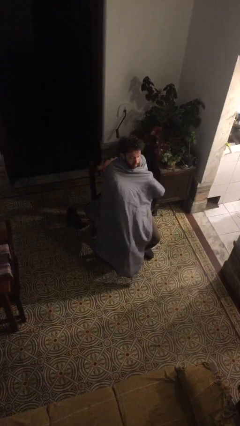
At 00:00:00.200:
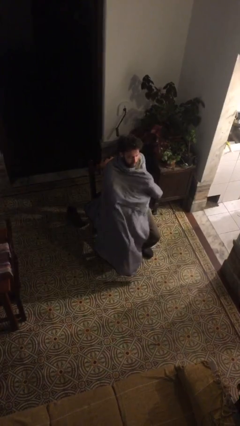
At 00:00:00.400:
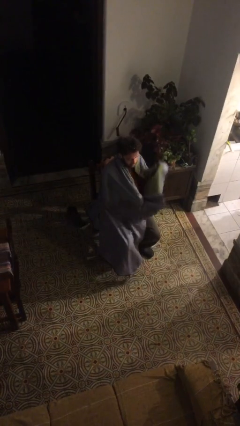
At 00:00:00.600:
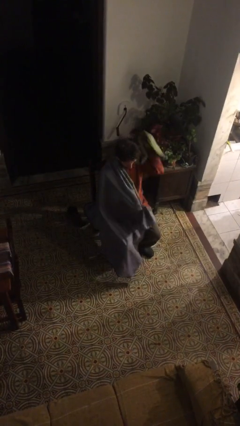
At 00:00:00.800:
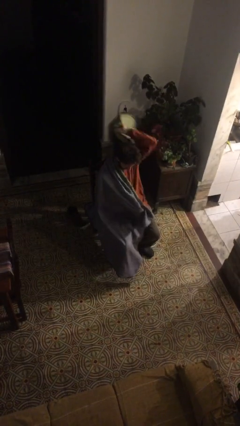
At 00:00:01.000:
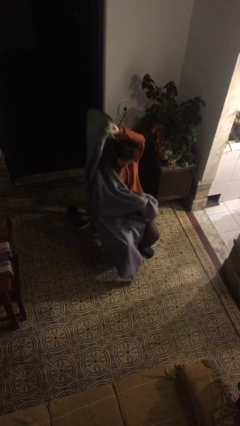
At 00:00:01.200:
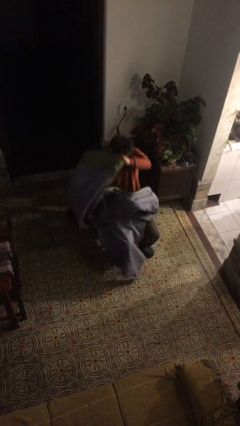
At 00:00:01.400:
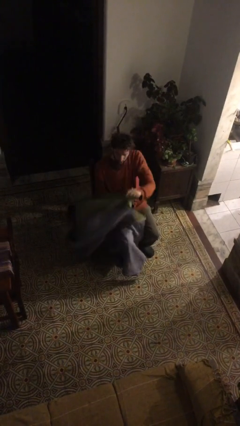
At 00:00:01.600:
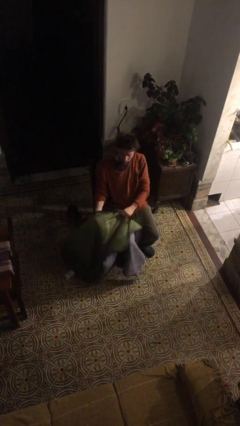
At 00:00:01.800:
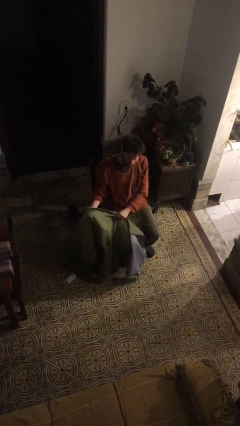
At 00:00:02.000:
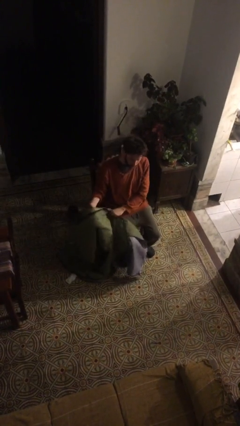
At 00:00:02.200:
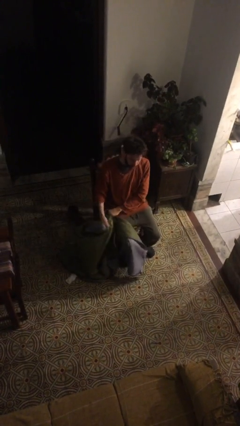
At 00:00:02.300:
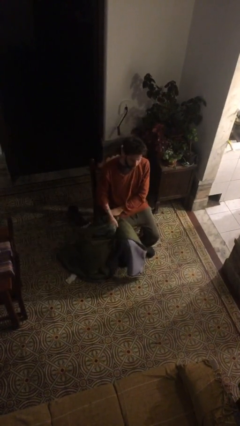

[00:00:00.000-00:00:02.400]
person uncovers with blanket

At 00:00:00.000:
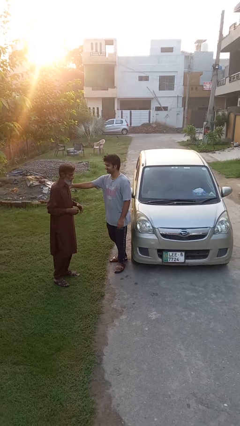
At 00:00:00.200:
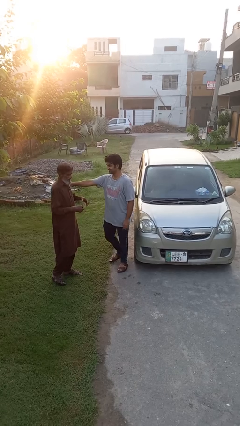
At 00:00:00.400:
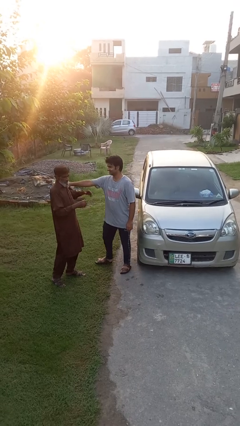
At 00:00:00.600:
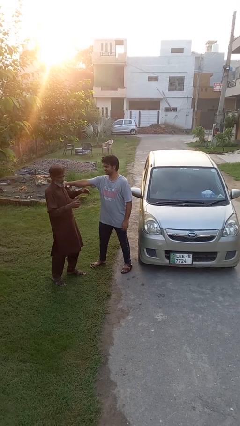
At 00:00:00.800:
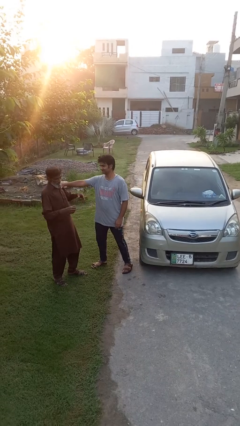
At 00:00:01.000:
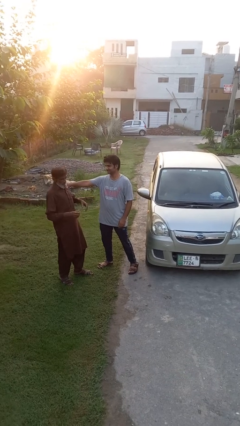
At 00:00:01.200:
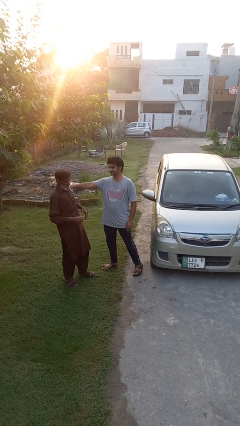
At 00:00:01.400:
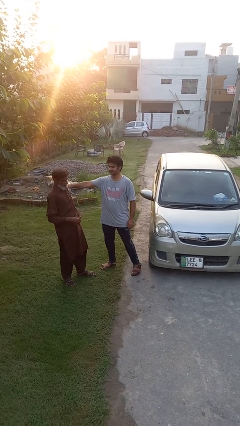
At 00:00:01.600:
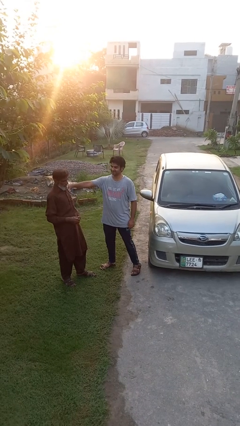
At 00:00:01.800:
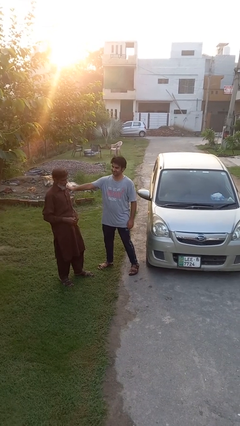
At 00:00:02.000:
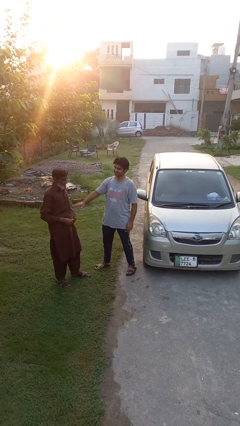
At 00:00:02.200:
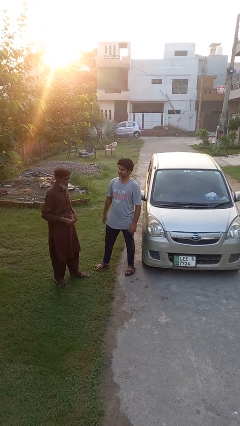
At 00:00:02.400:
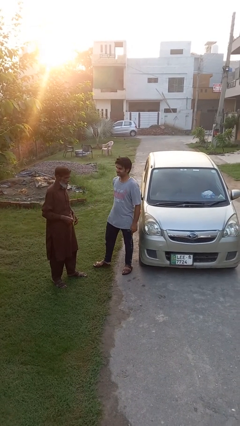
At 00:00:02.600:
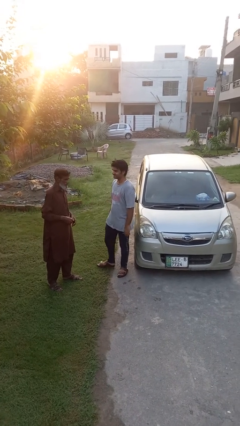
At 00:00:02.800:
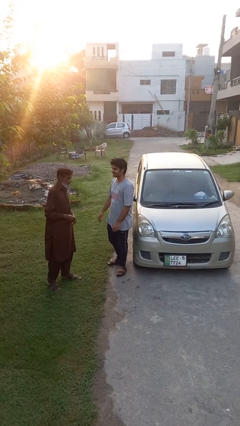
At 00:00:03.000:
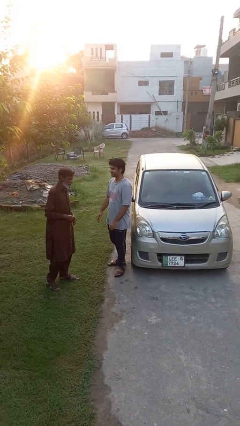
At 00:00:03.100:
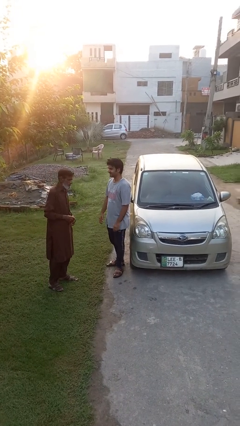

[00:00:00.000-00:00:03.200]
person shoves person

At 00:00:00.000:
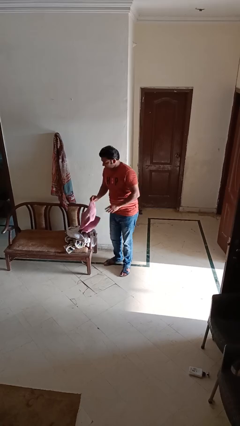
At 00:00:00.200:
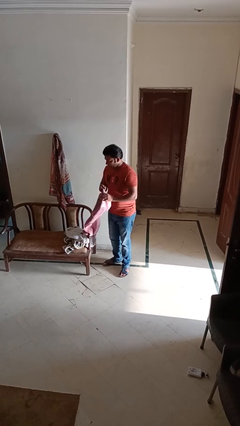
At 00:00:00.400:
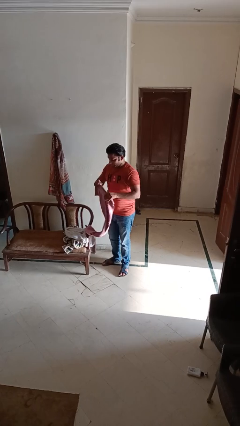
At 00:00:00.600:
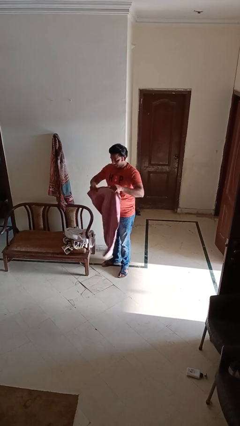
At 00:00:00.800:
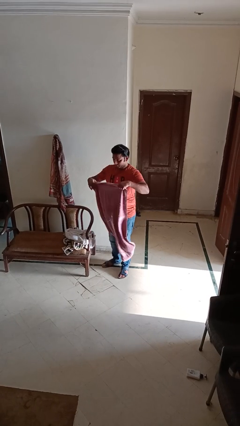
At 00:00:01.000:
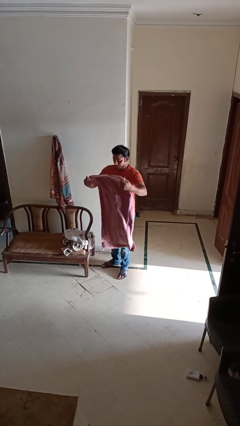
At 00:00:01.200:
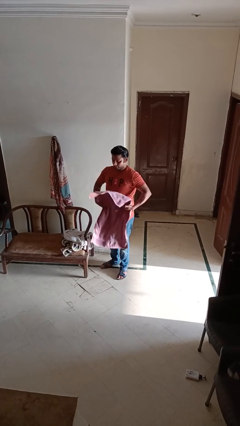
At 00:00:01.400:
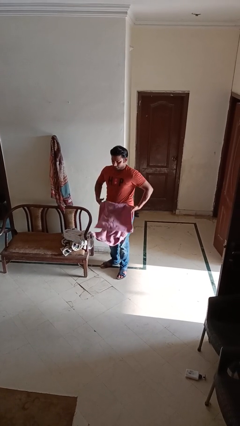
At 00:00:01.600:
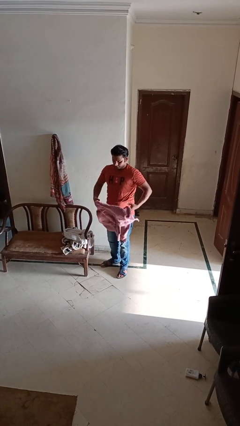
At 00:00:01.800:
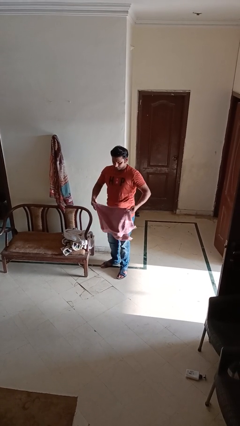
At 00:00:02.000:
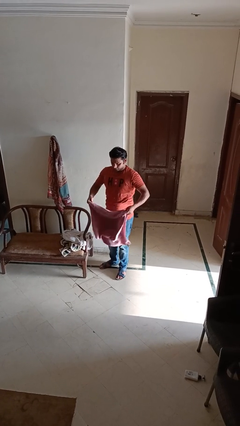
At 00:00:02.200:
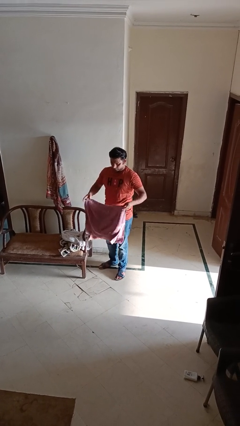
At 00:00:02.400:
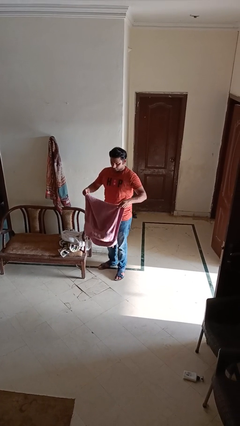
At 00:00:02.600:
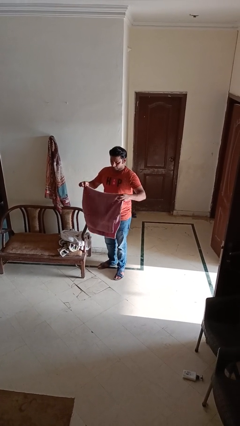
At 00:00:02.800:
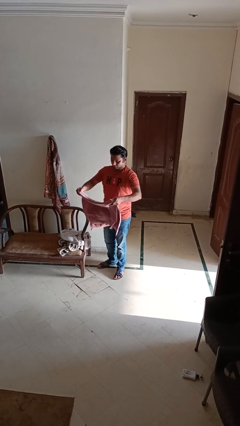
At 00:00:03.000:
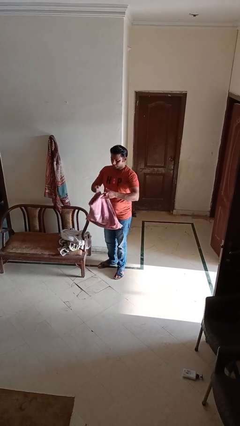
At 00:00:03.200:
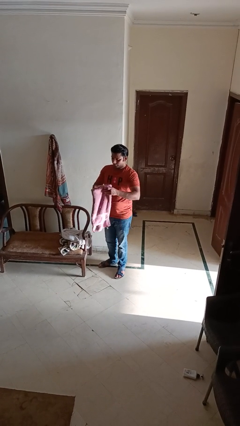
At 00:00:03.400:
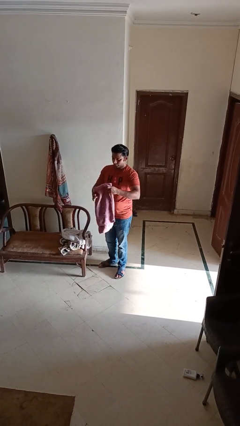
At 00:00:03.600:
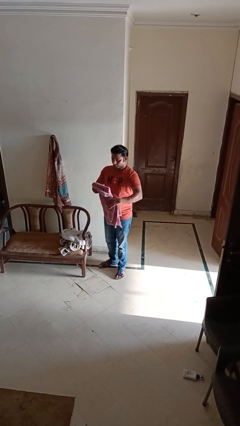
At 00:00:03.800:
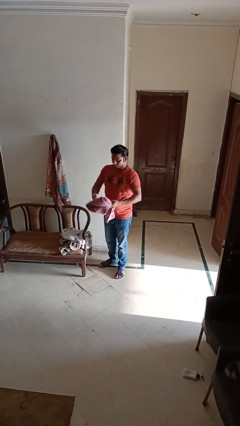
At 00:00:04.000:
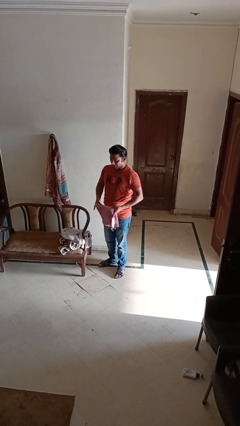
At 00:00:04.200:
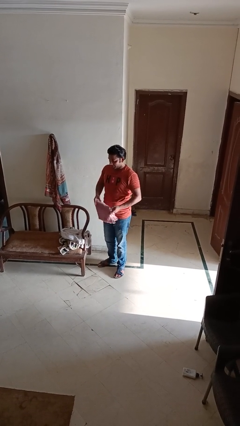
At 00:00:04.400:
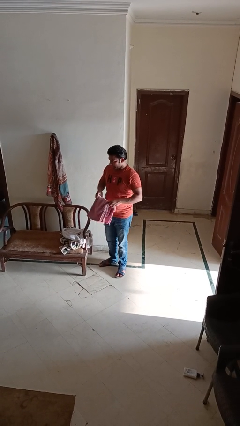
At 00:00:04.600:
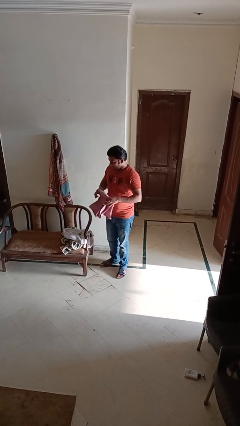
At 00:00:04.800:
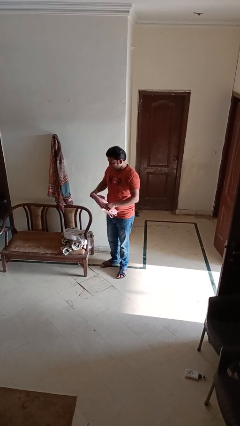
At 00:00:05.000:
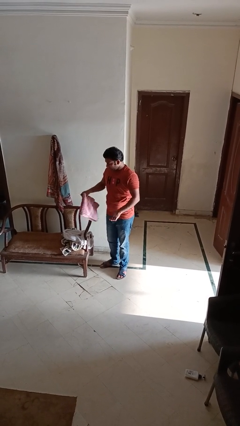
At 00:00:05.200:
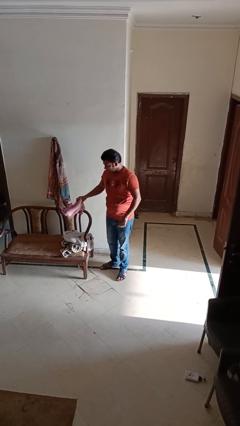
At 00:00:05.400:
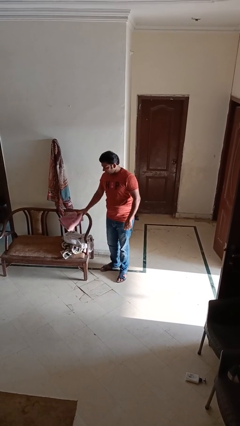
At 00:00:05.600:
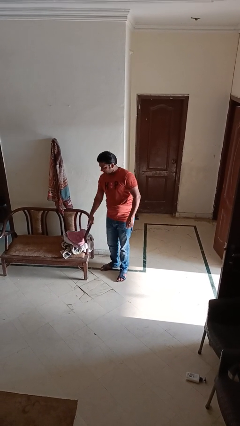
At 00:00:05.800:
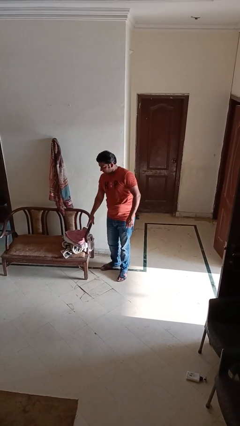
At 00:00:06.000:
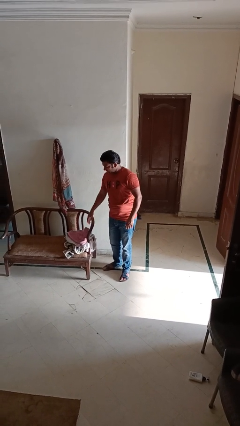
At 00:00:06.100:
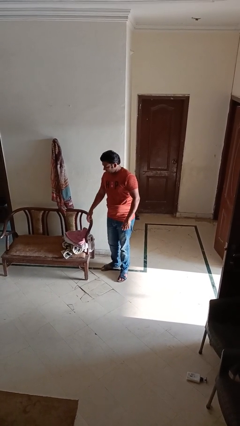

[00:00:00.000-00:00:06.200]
person folds towel

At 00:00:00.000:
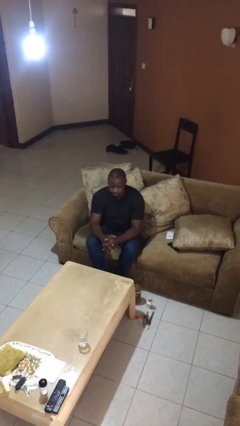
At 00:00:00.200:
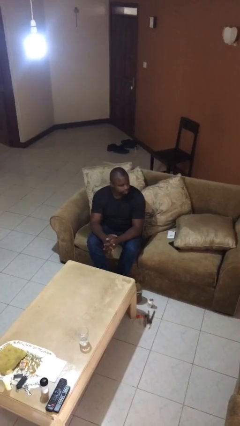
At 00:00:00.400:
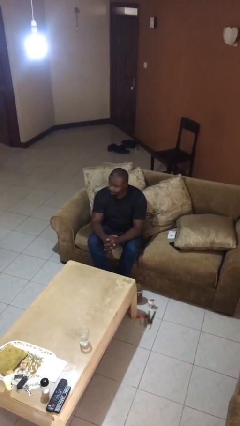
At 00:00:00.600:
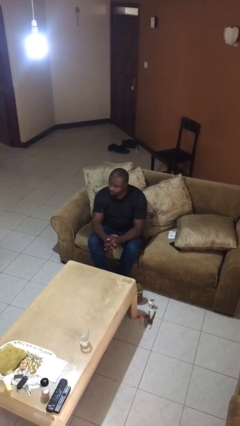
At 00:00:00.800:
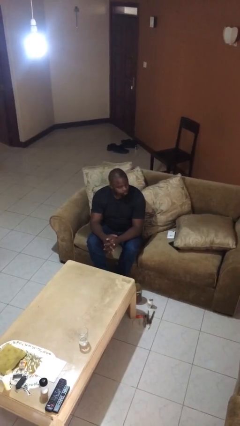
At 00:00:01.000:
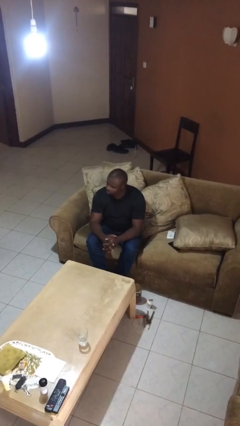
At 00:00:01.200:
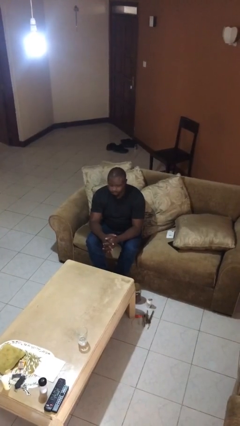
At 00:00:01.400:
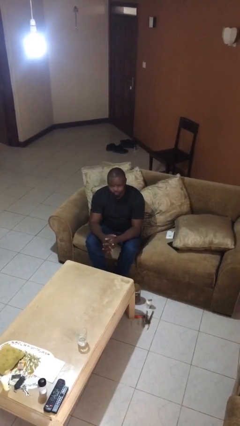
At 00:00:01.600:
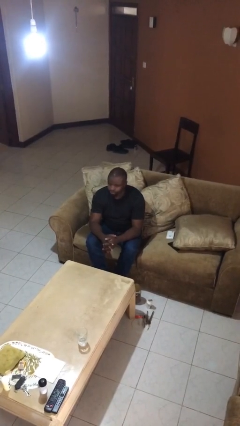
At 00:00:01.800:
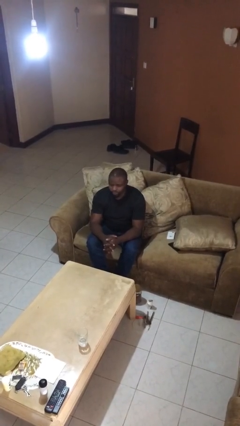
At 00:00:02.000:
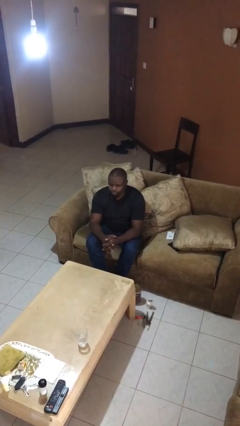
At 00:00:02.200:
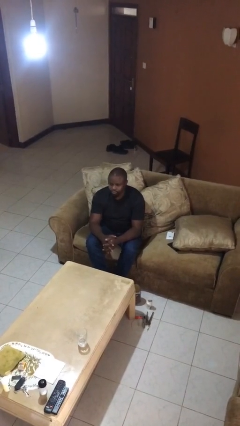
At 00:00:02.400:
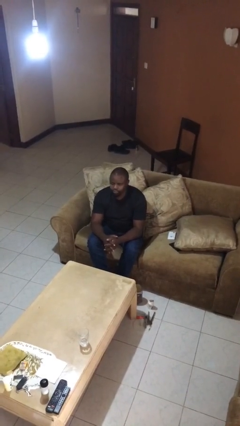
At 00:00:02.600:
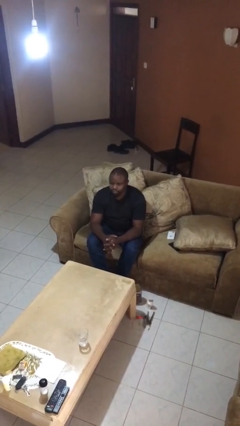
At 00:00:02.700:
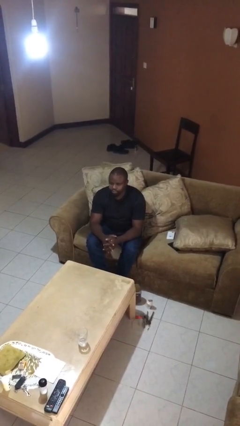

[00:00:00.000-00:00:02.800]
person shakes head

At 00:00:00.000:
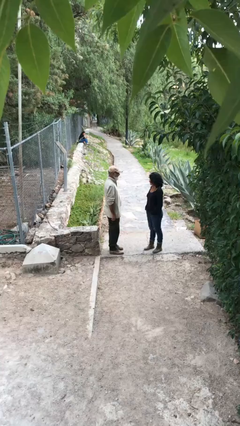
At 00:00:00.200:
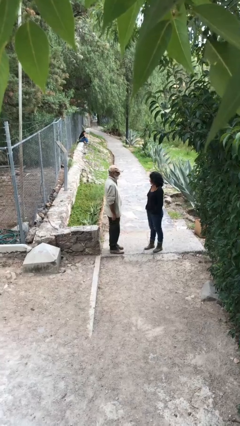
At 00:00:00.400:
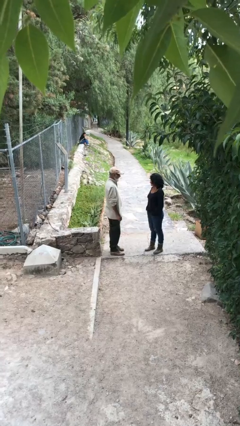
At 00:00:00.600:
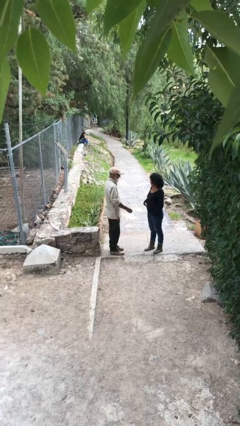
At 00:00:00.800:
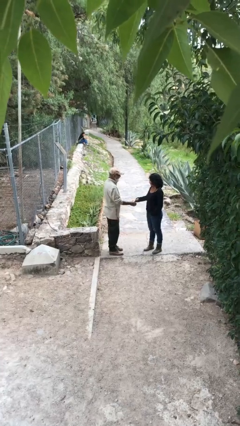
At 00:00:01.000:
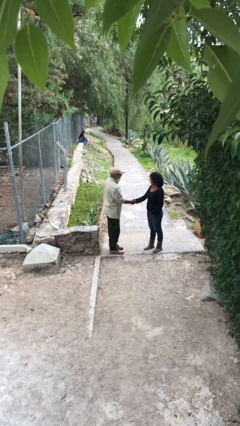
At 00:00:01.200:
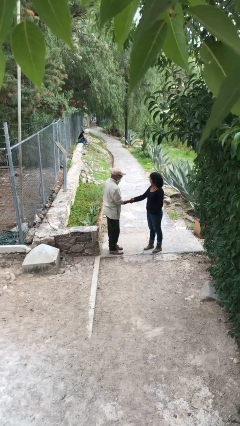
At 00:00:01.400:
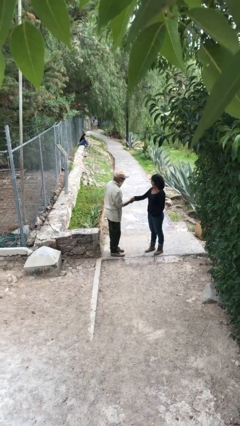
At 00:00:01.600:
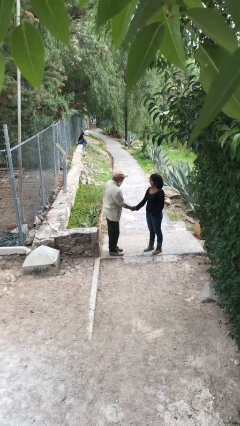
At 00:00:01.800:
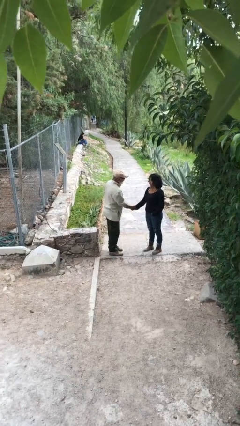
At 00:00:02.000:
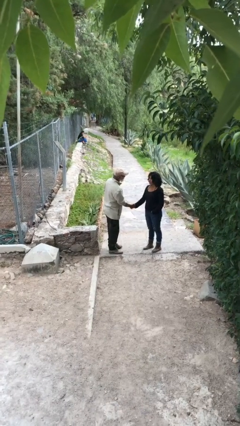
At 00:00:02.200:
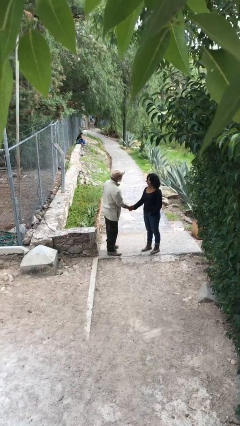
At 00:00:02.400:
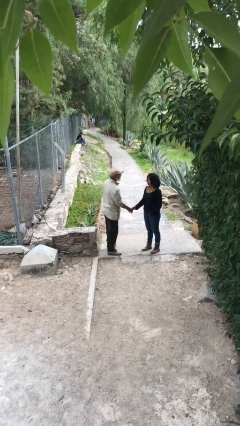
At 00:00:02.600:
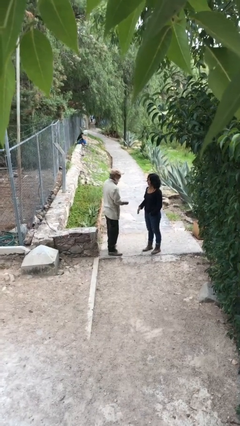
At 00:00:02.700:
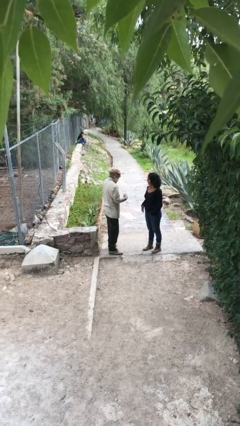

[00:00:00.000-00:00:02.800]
person shakes hand
